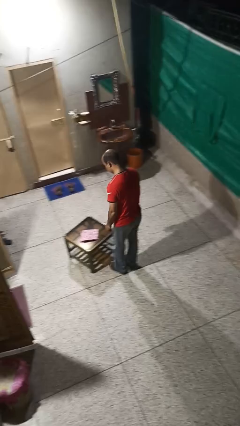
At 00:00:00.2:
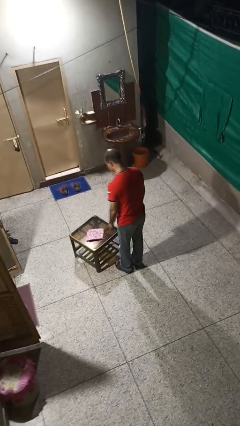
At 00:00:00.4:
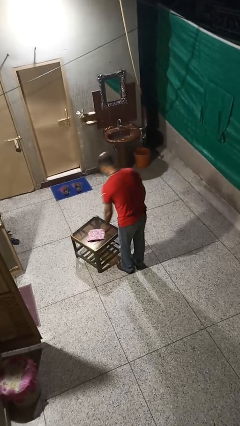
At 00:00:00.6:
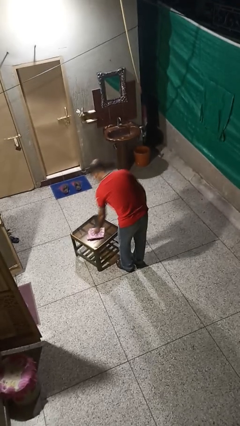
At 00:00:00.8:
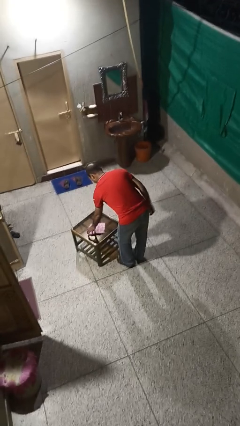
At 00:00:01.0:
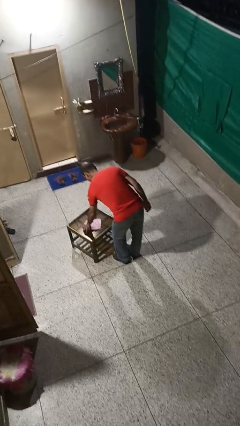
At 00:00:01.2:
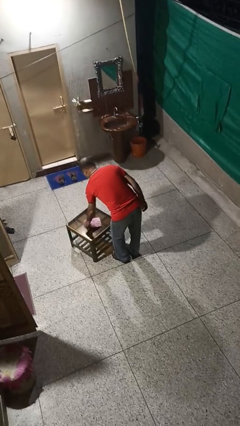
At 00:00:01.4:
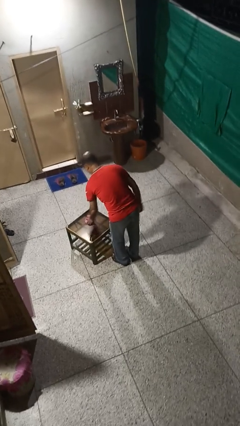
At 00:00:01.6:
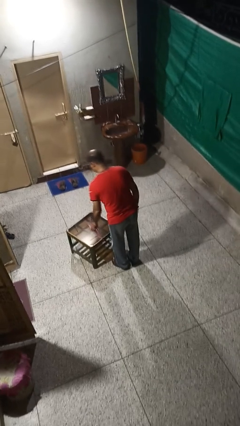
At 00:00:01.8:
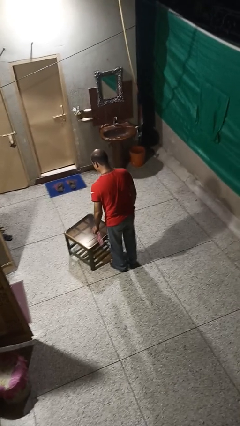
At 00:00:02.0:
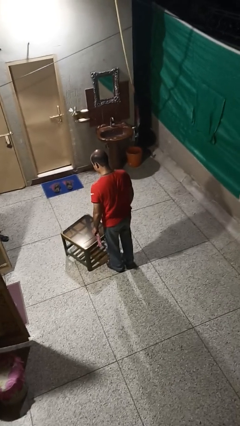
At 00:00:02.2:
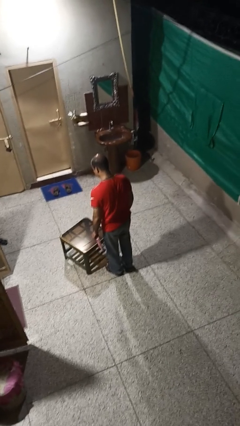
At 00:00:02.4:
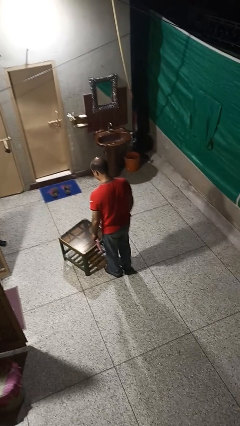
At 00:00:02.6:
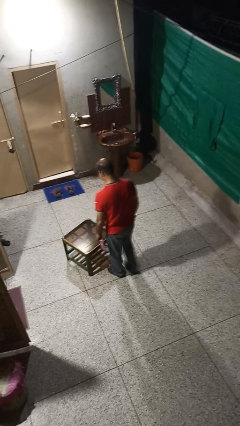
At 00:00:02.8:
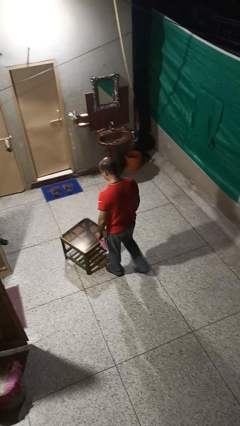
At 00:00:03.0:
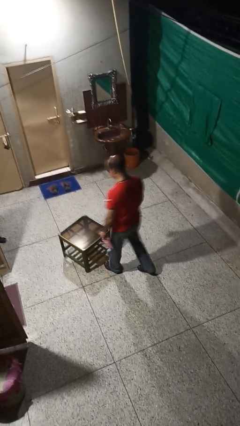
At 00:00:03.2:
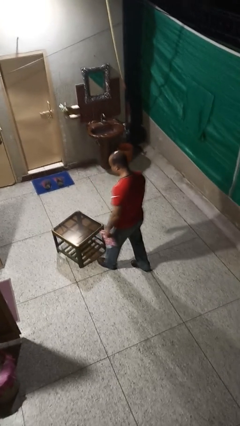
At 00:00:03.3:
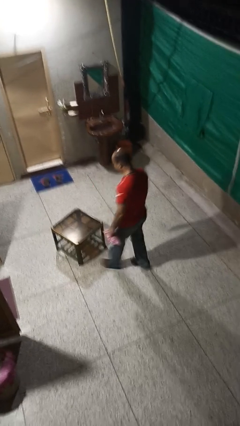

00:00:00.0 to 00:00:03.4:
person picks up object from table

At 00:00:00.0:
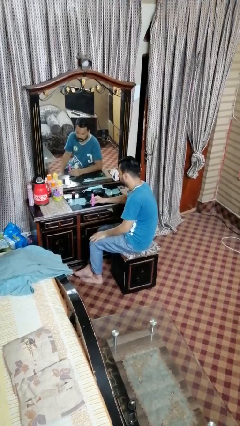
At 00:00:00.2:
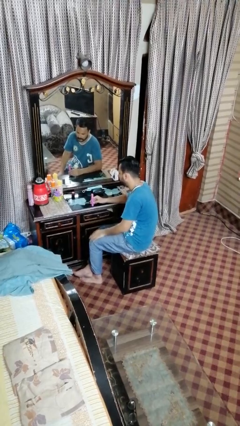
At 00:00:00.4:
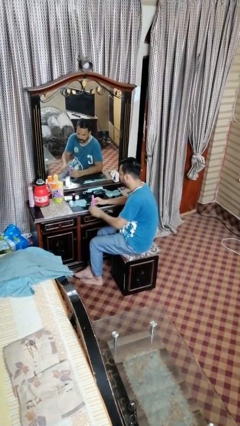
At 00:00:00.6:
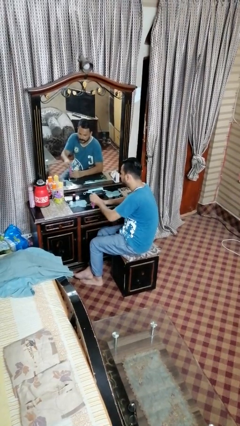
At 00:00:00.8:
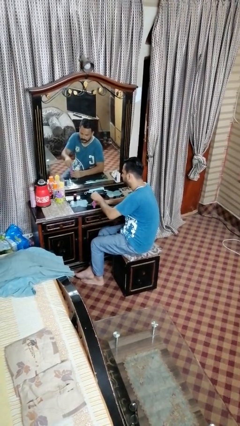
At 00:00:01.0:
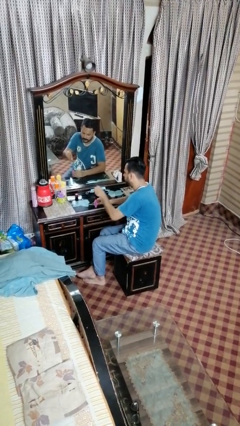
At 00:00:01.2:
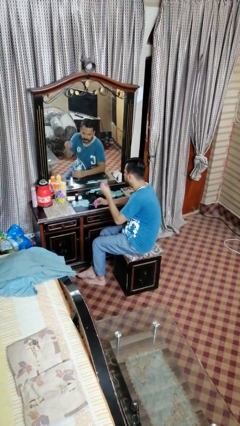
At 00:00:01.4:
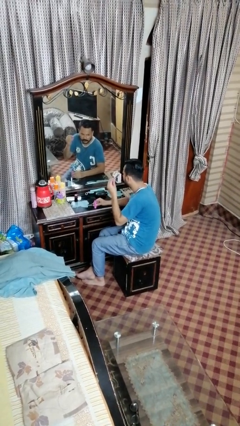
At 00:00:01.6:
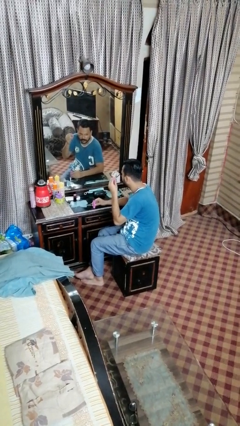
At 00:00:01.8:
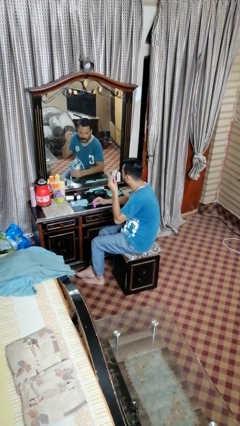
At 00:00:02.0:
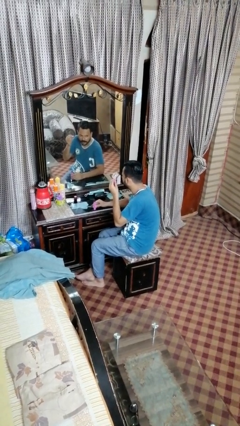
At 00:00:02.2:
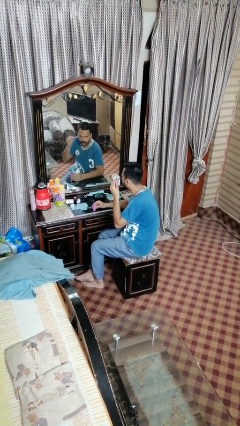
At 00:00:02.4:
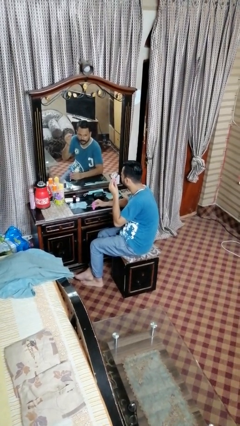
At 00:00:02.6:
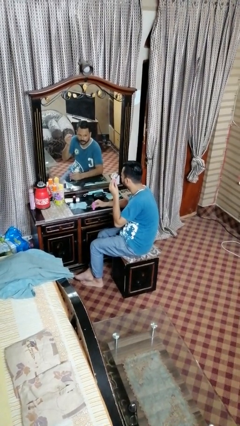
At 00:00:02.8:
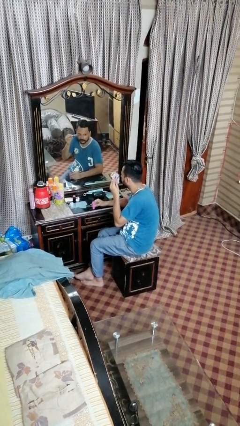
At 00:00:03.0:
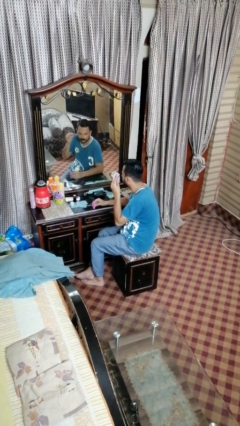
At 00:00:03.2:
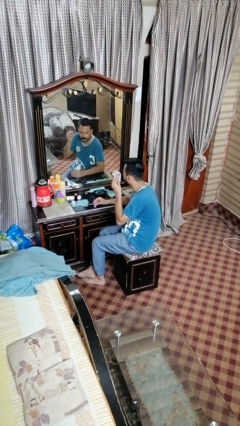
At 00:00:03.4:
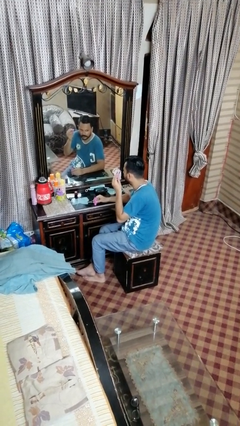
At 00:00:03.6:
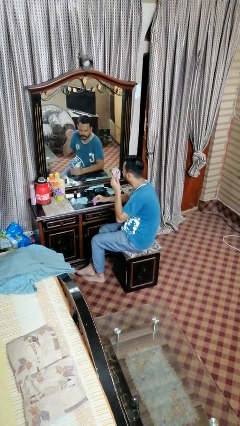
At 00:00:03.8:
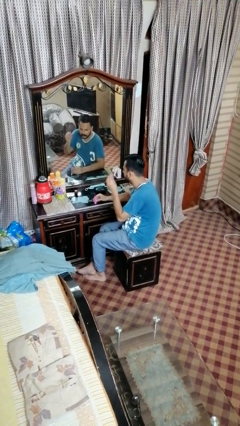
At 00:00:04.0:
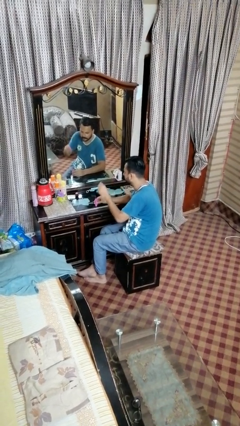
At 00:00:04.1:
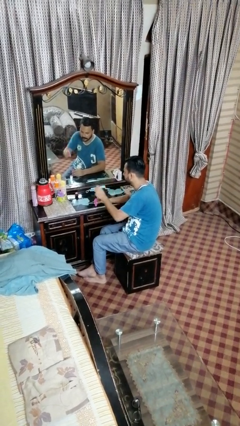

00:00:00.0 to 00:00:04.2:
person applies eye makeup

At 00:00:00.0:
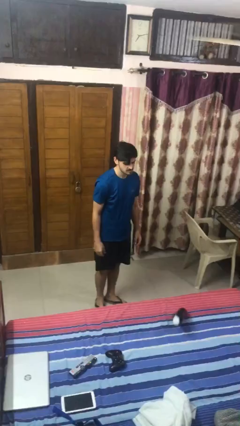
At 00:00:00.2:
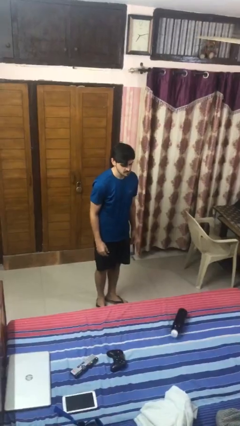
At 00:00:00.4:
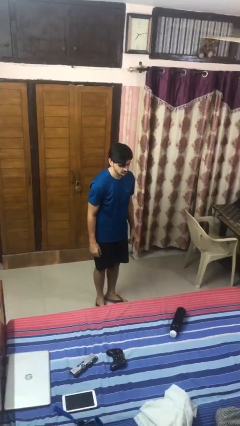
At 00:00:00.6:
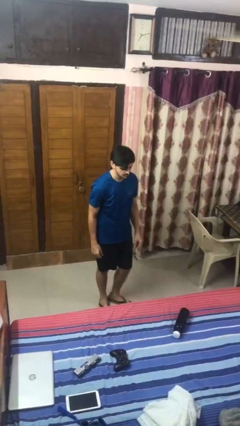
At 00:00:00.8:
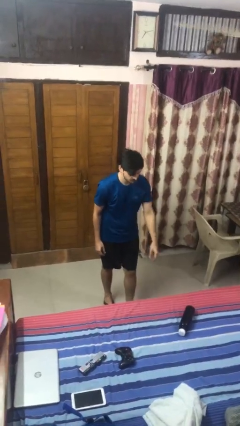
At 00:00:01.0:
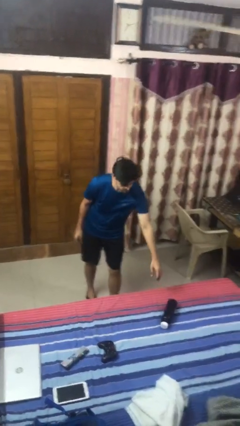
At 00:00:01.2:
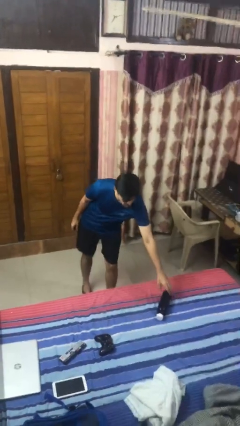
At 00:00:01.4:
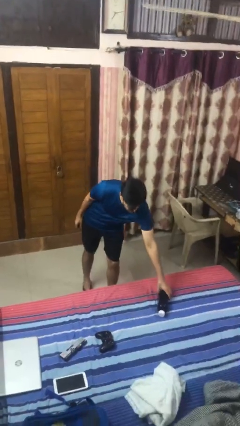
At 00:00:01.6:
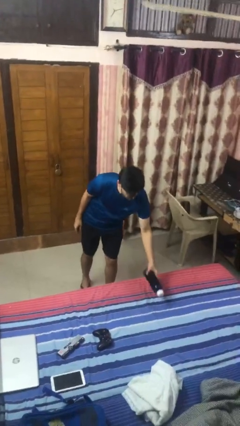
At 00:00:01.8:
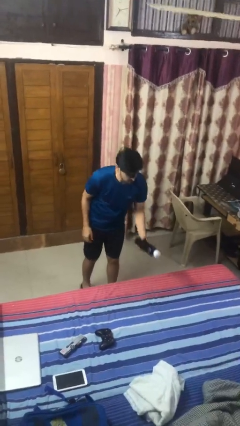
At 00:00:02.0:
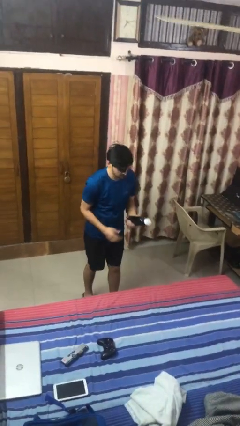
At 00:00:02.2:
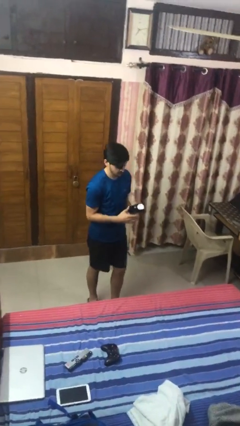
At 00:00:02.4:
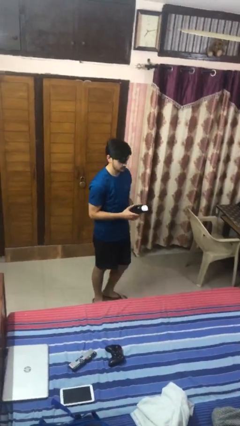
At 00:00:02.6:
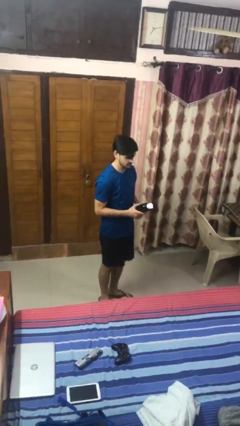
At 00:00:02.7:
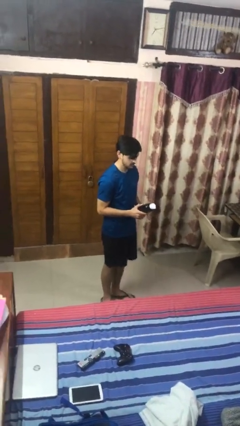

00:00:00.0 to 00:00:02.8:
person picks up object from bed

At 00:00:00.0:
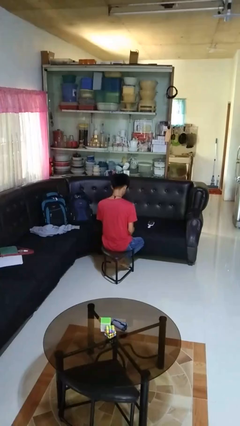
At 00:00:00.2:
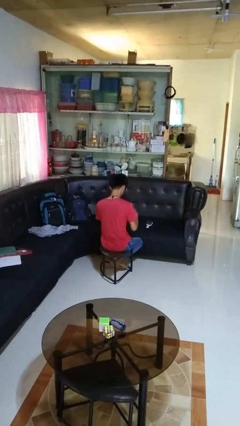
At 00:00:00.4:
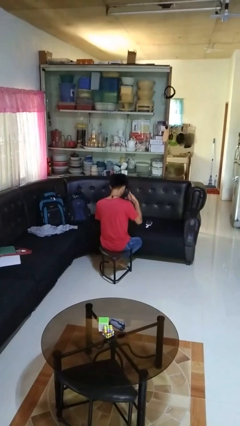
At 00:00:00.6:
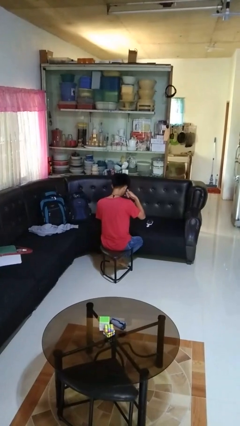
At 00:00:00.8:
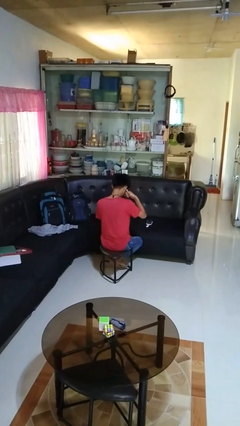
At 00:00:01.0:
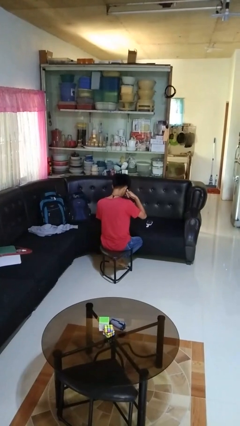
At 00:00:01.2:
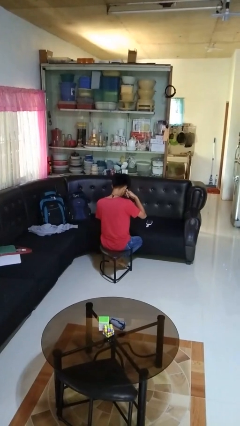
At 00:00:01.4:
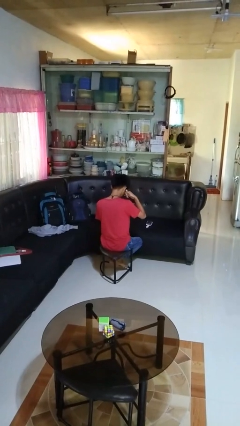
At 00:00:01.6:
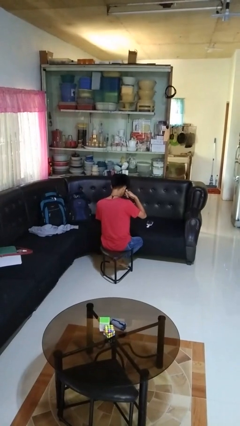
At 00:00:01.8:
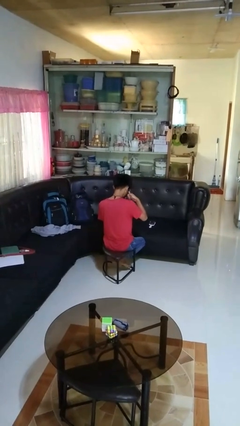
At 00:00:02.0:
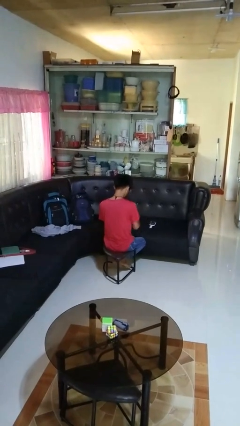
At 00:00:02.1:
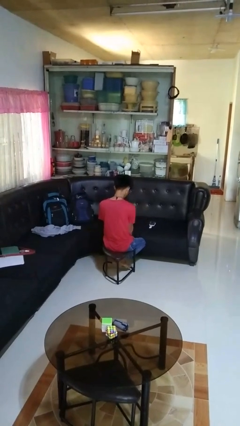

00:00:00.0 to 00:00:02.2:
person gestures call me

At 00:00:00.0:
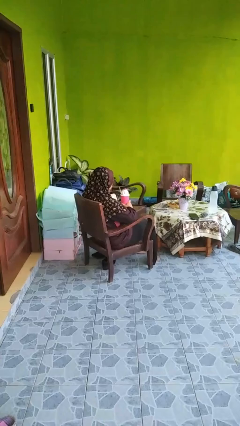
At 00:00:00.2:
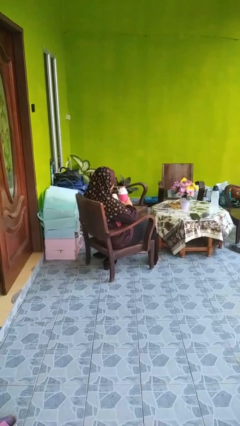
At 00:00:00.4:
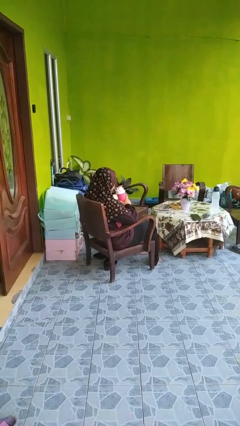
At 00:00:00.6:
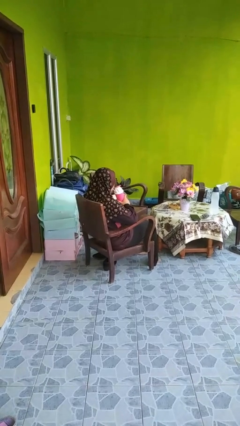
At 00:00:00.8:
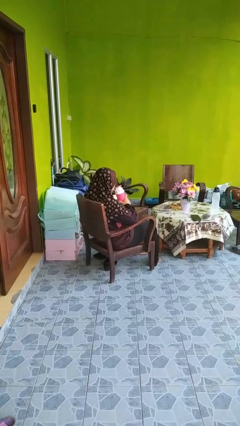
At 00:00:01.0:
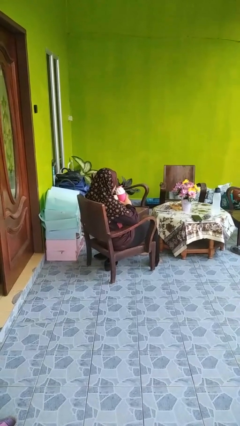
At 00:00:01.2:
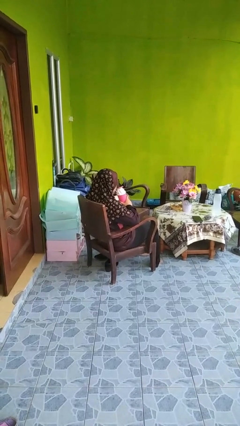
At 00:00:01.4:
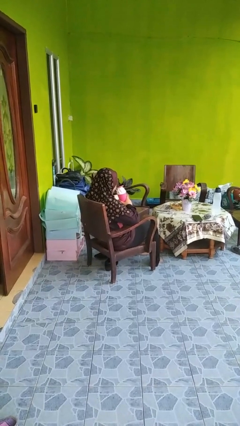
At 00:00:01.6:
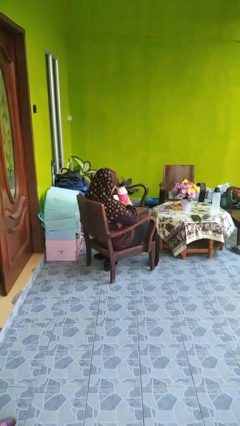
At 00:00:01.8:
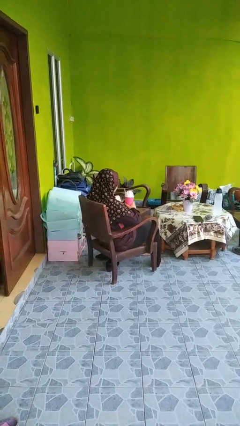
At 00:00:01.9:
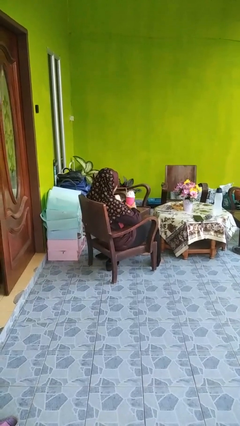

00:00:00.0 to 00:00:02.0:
person drinks from straw

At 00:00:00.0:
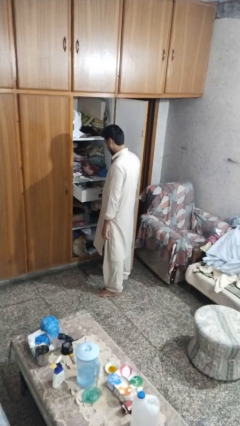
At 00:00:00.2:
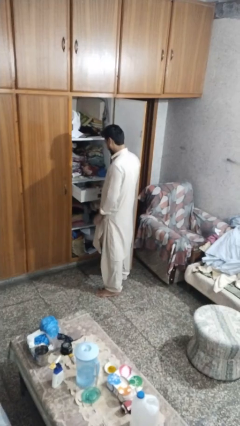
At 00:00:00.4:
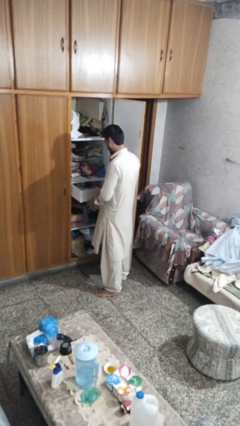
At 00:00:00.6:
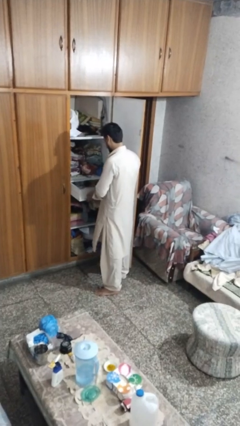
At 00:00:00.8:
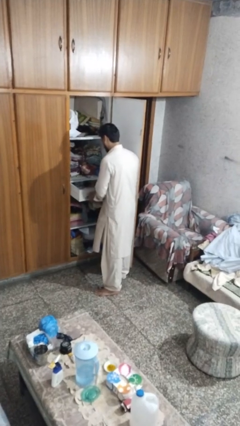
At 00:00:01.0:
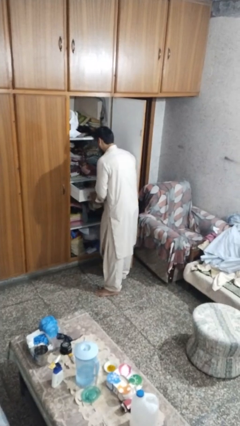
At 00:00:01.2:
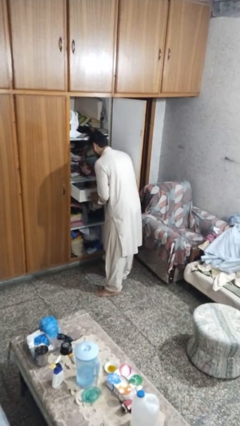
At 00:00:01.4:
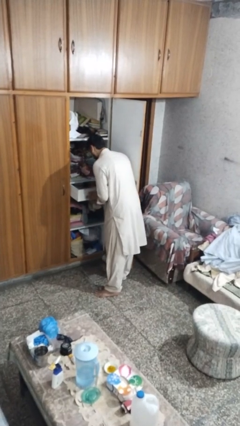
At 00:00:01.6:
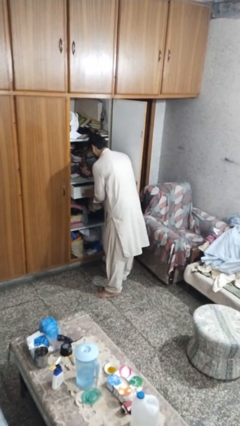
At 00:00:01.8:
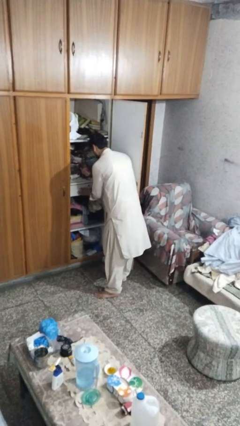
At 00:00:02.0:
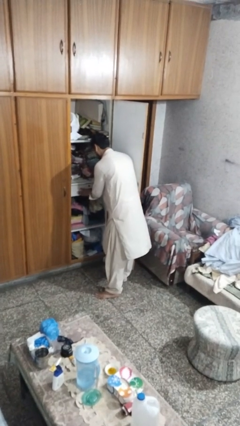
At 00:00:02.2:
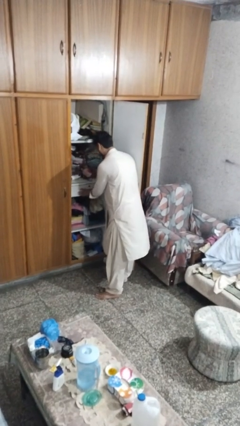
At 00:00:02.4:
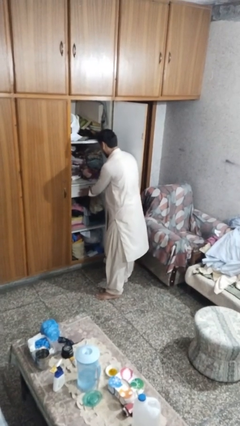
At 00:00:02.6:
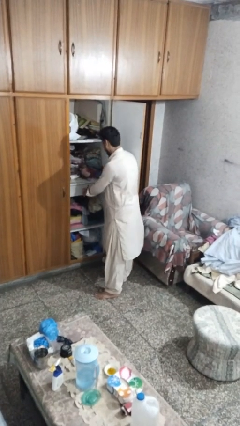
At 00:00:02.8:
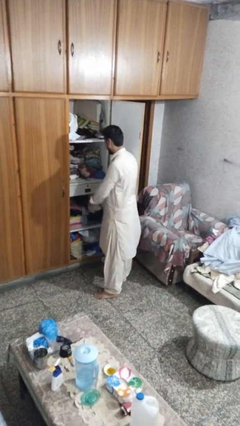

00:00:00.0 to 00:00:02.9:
person closes dresser drawer
